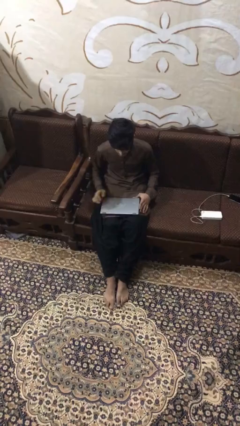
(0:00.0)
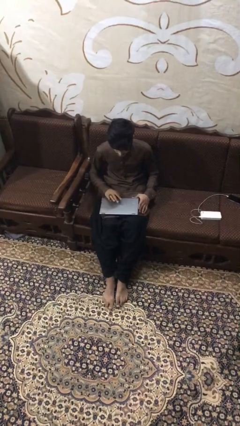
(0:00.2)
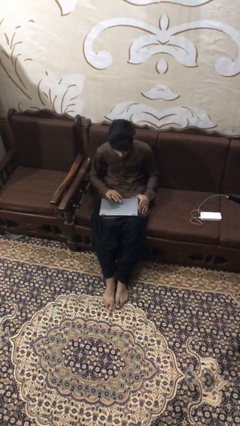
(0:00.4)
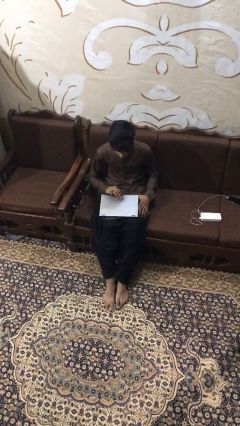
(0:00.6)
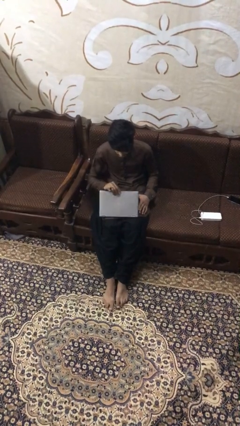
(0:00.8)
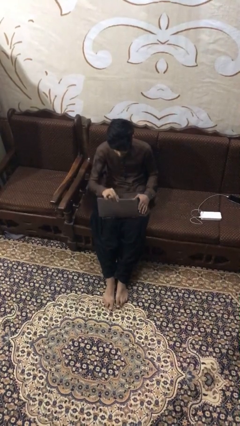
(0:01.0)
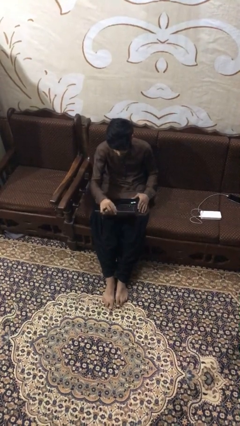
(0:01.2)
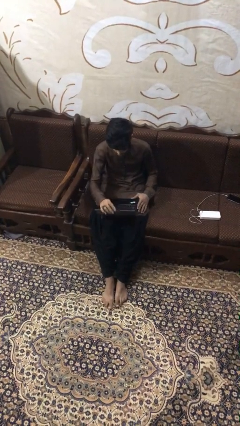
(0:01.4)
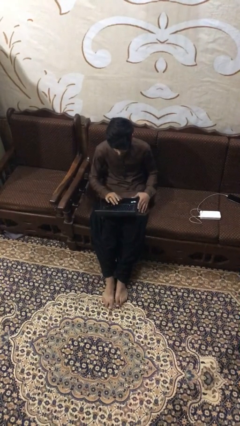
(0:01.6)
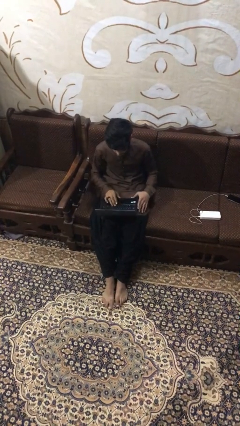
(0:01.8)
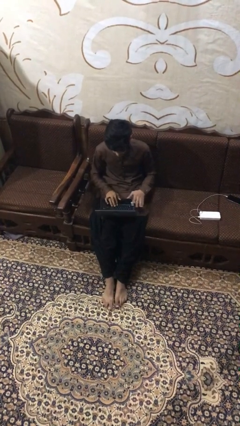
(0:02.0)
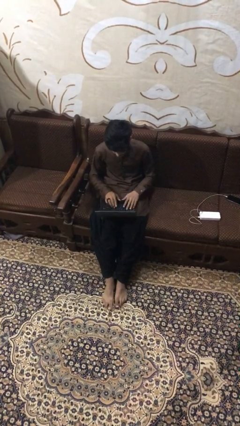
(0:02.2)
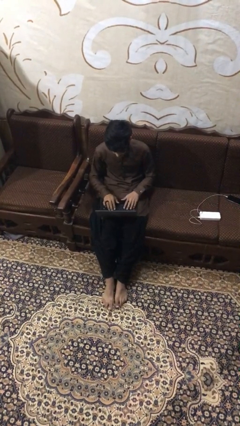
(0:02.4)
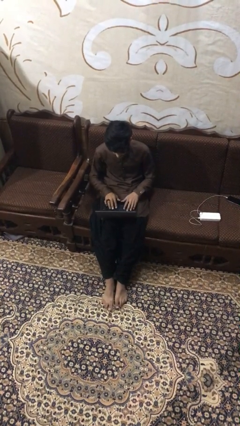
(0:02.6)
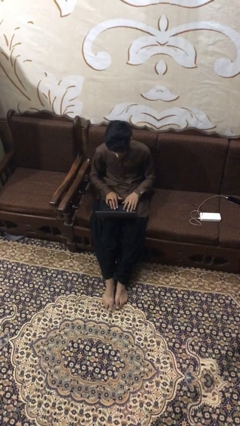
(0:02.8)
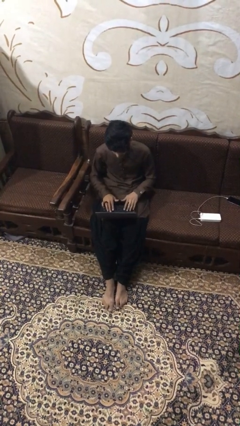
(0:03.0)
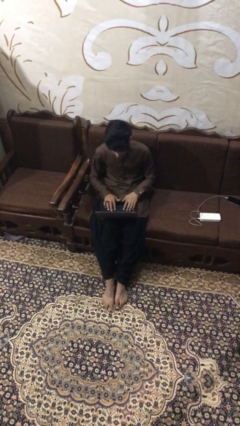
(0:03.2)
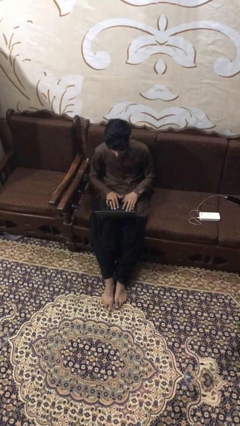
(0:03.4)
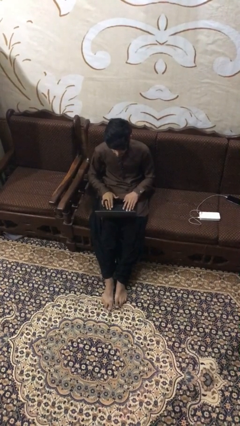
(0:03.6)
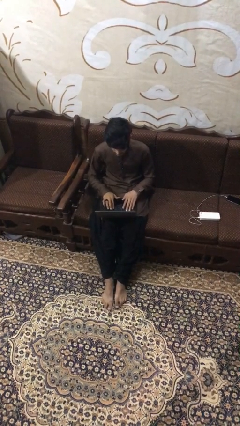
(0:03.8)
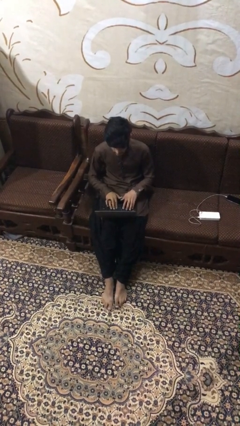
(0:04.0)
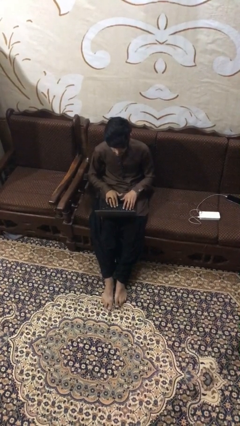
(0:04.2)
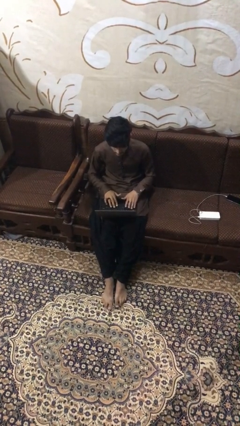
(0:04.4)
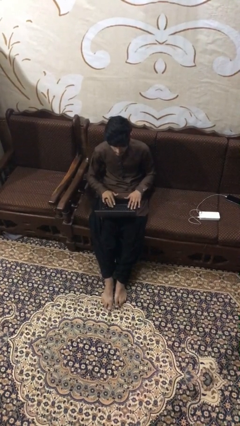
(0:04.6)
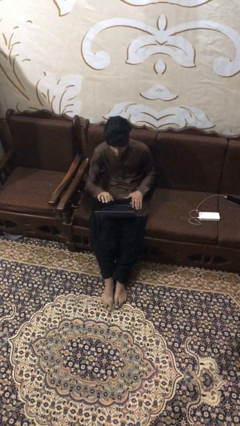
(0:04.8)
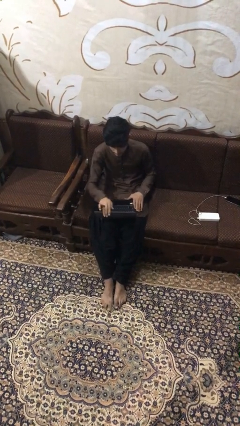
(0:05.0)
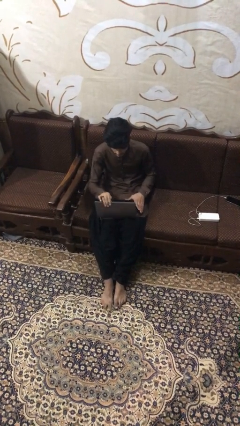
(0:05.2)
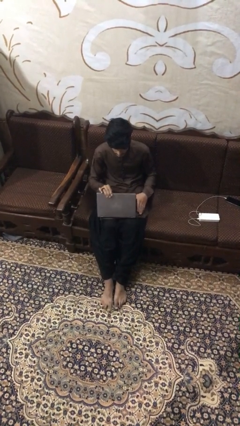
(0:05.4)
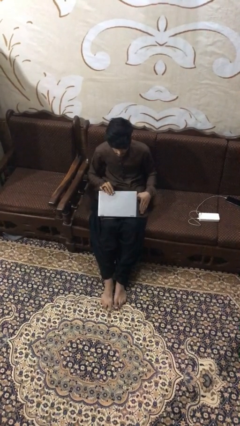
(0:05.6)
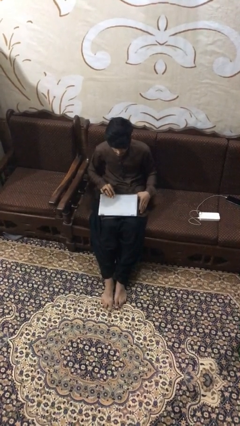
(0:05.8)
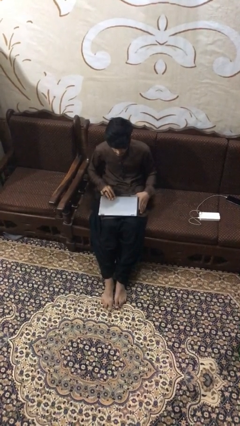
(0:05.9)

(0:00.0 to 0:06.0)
person interacts with laptop

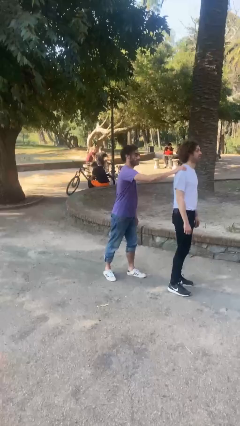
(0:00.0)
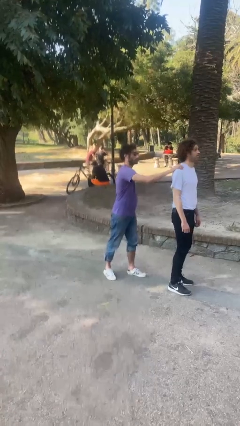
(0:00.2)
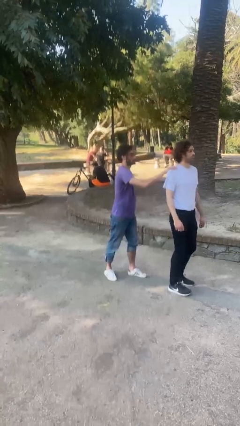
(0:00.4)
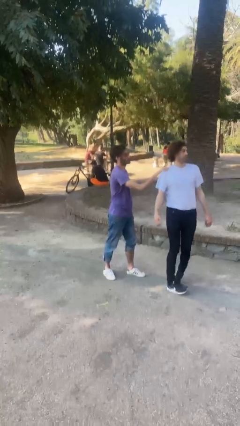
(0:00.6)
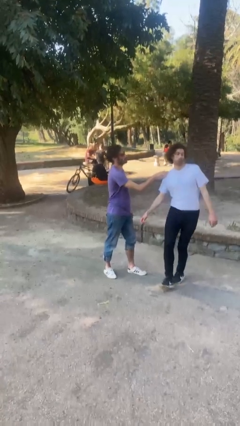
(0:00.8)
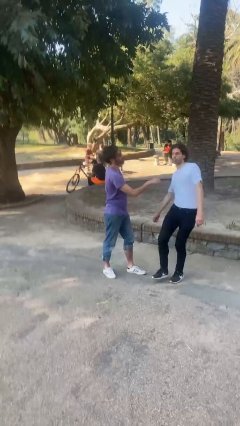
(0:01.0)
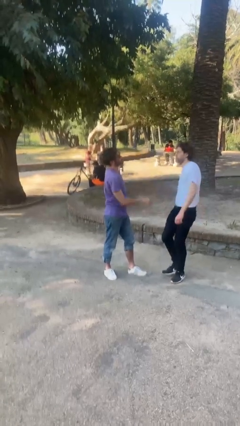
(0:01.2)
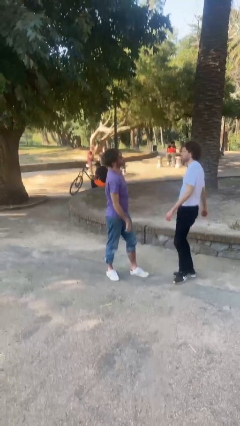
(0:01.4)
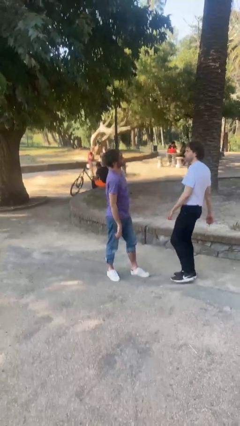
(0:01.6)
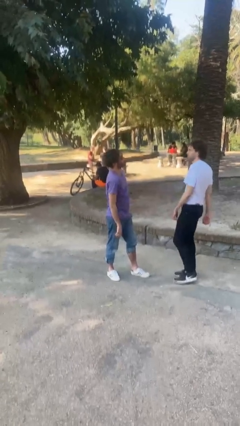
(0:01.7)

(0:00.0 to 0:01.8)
person spins person around

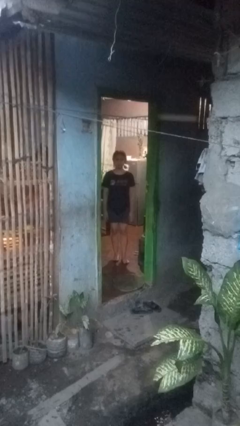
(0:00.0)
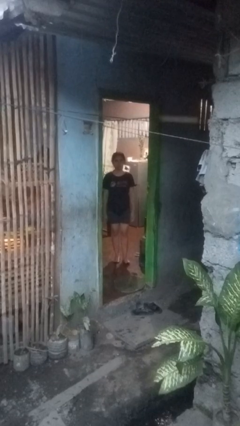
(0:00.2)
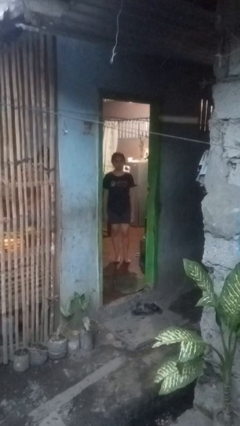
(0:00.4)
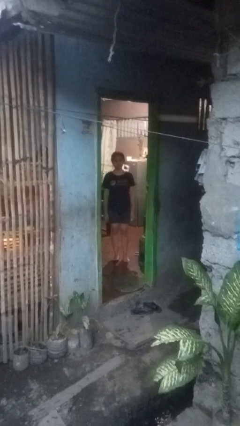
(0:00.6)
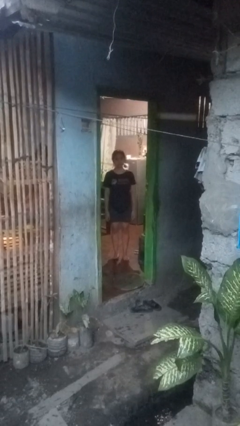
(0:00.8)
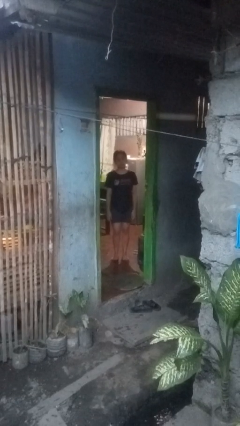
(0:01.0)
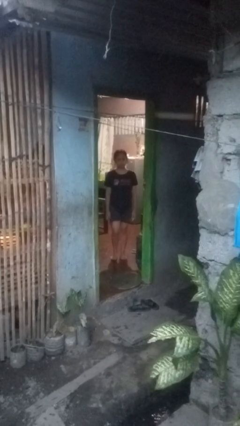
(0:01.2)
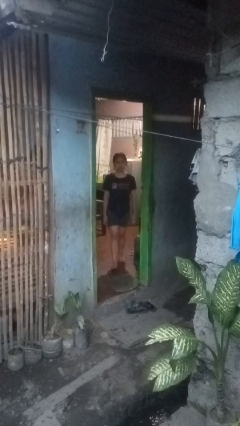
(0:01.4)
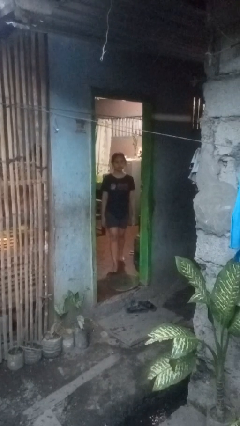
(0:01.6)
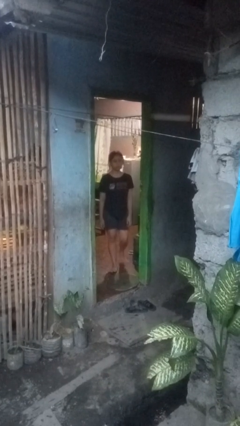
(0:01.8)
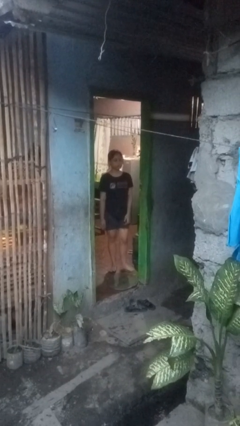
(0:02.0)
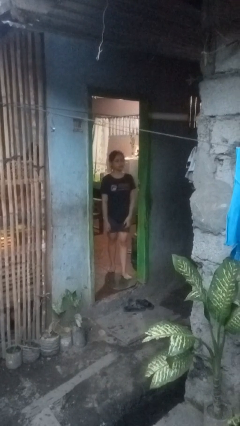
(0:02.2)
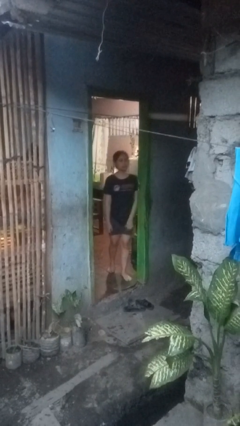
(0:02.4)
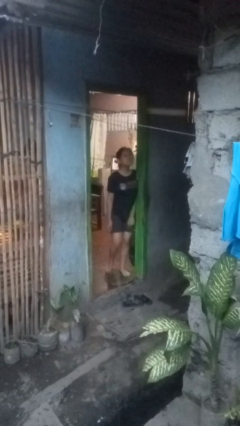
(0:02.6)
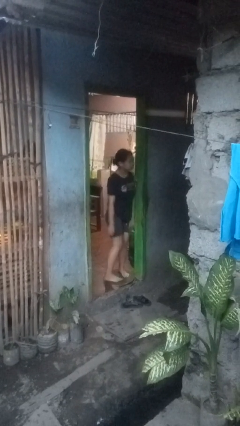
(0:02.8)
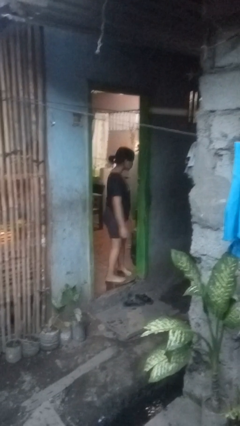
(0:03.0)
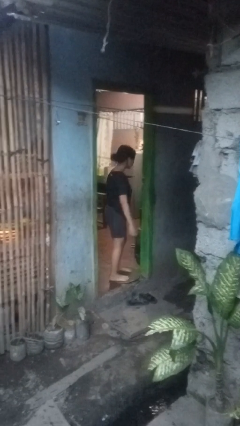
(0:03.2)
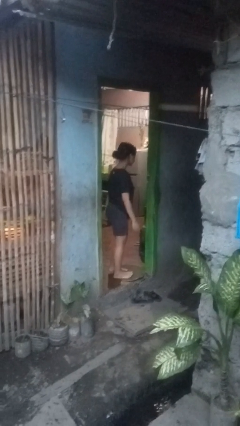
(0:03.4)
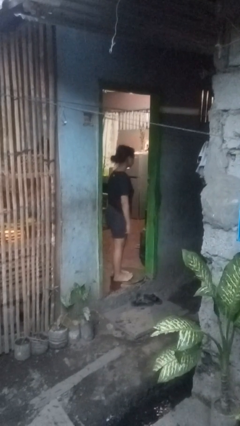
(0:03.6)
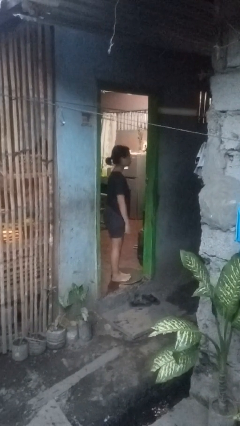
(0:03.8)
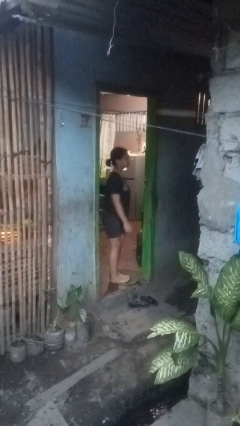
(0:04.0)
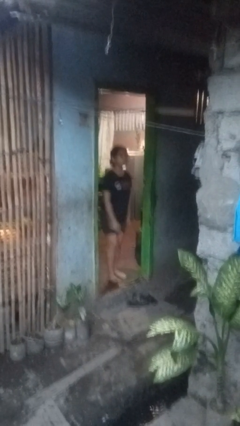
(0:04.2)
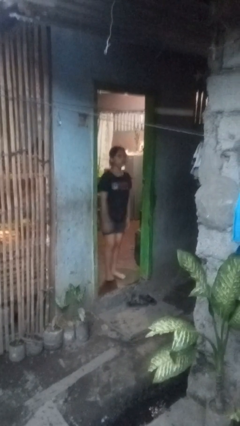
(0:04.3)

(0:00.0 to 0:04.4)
person bumps into wall

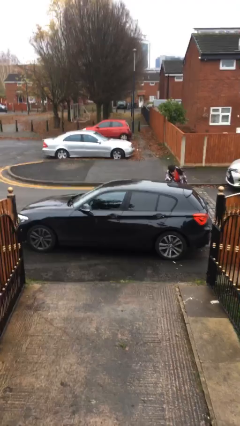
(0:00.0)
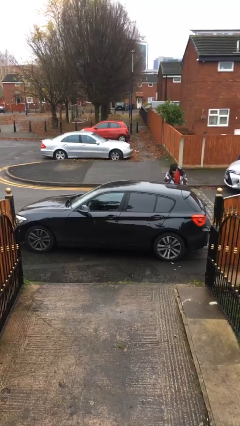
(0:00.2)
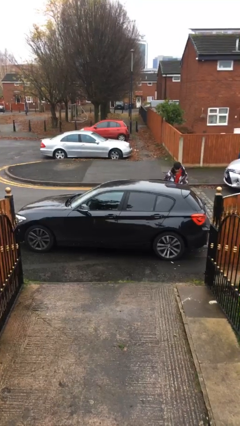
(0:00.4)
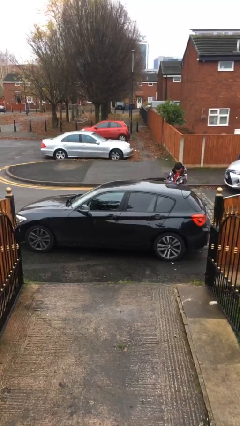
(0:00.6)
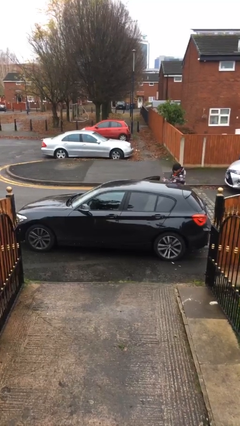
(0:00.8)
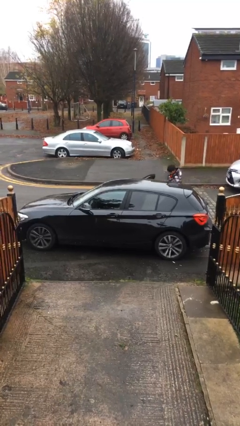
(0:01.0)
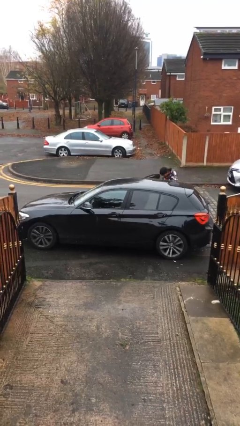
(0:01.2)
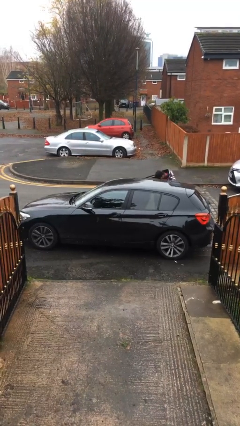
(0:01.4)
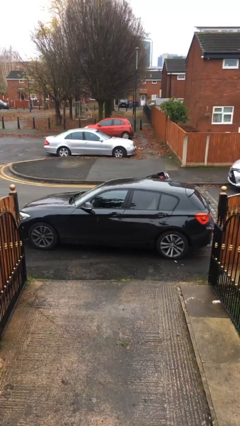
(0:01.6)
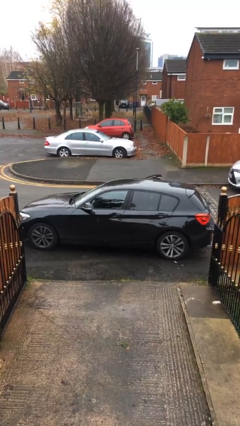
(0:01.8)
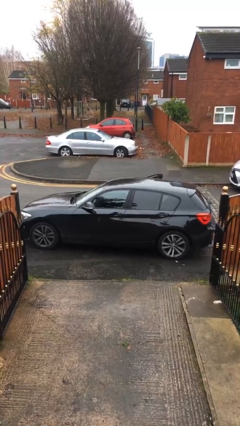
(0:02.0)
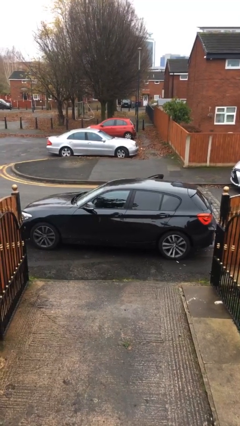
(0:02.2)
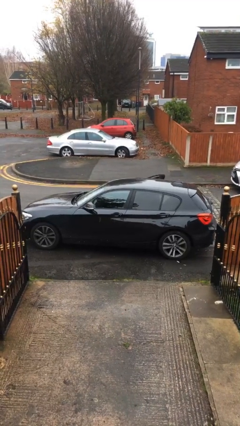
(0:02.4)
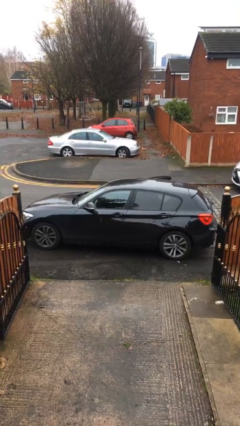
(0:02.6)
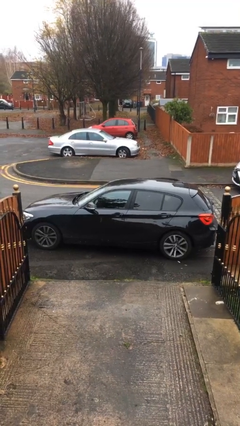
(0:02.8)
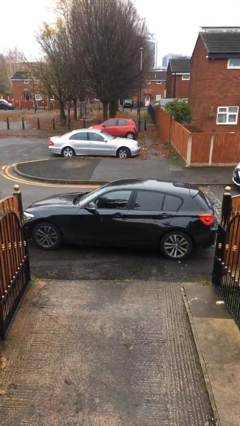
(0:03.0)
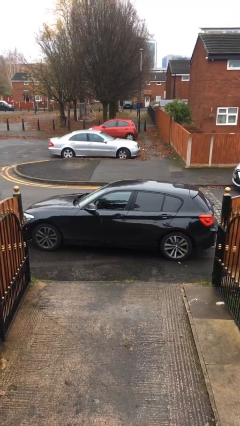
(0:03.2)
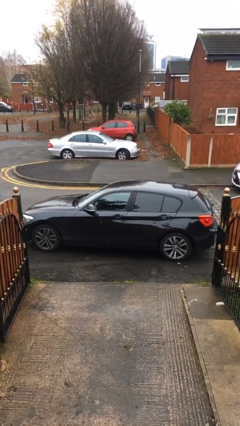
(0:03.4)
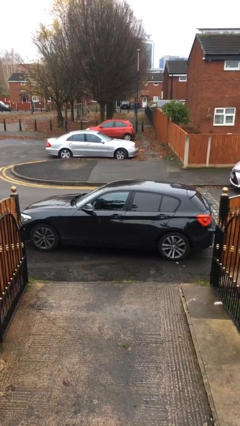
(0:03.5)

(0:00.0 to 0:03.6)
car picks up person

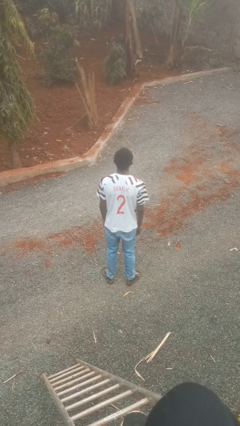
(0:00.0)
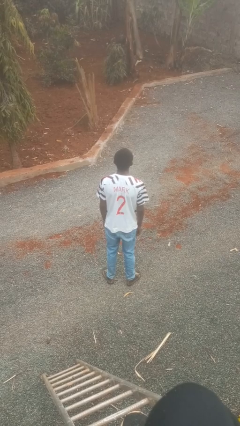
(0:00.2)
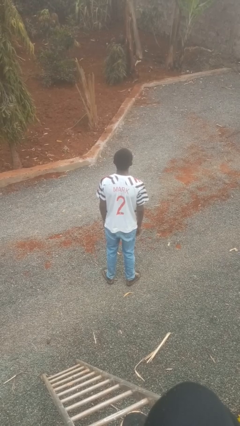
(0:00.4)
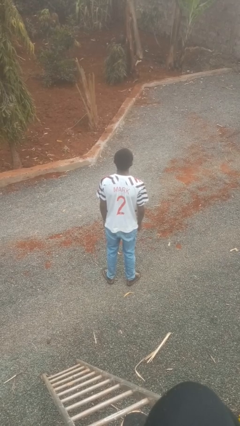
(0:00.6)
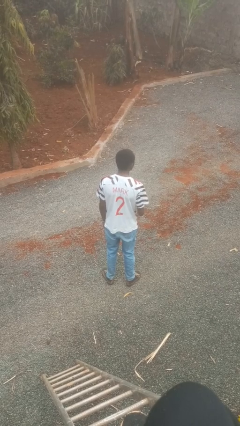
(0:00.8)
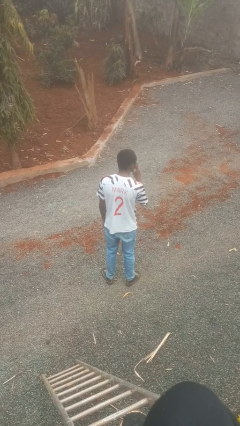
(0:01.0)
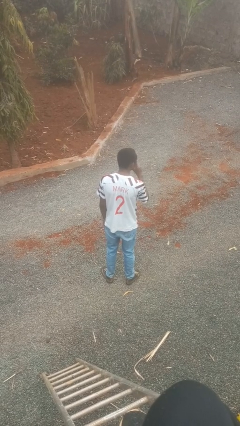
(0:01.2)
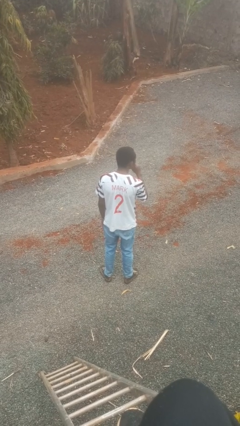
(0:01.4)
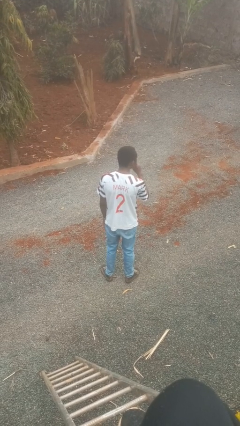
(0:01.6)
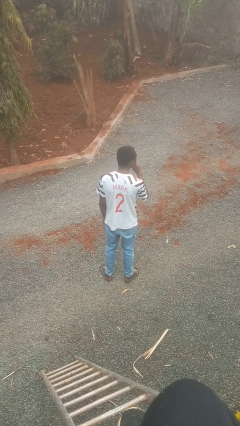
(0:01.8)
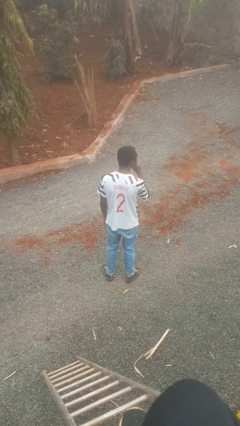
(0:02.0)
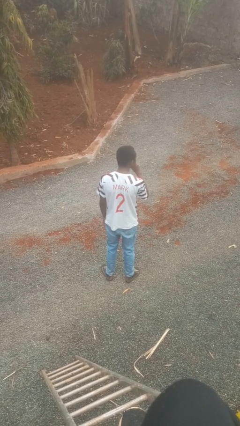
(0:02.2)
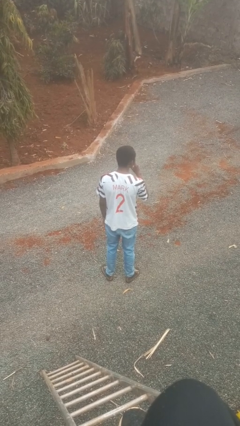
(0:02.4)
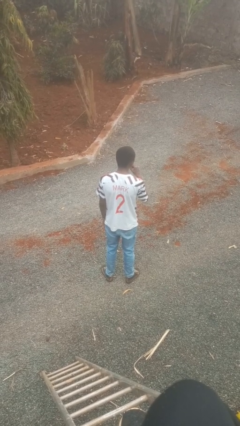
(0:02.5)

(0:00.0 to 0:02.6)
person gestures be quiet
